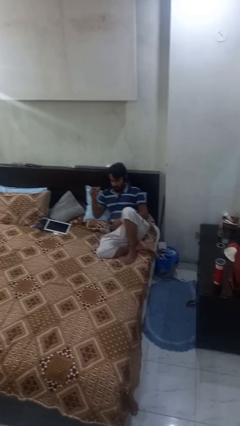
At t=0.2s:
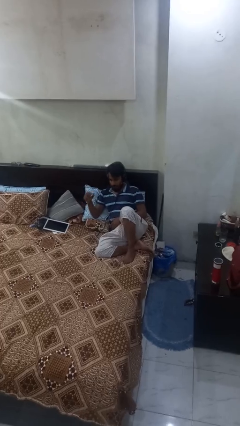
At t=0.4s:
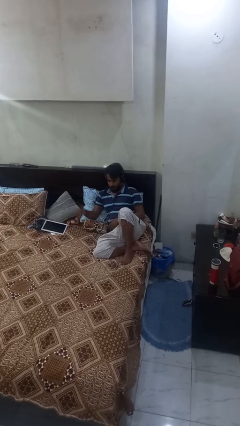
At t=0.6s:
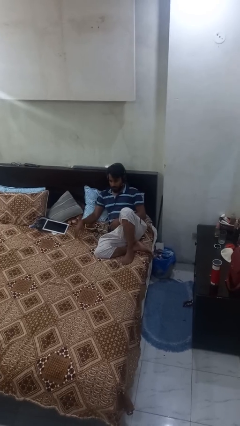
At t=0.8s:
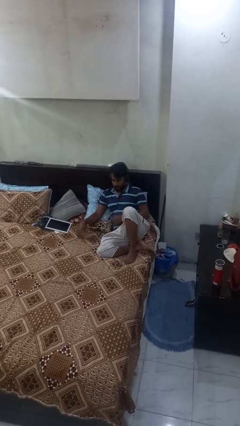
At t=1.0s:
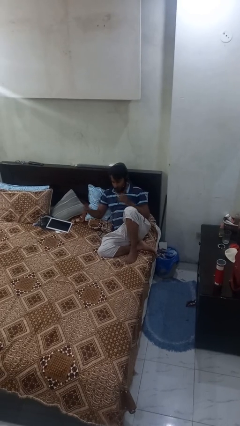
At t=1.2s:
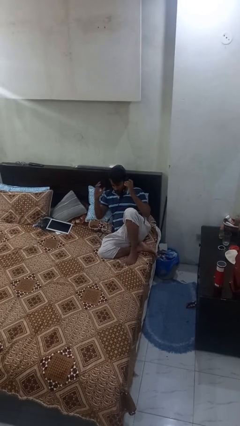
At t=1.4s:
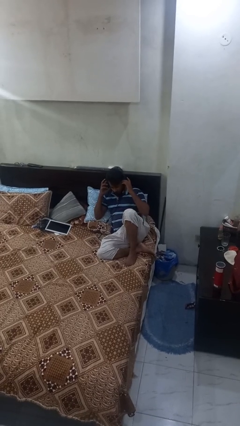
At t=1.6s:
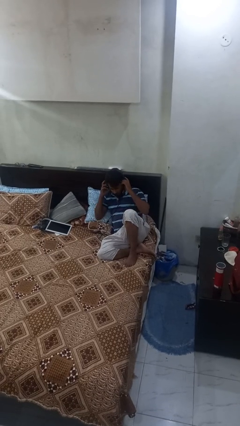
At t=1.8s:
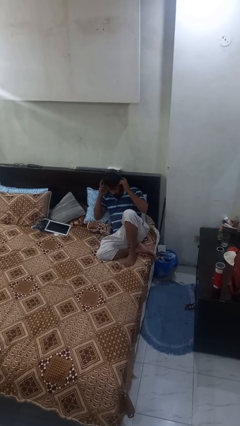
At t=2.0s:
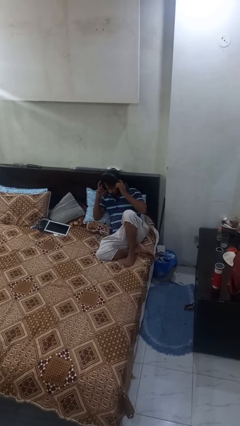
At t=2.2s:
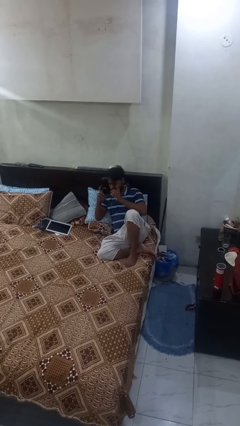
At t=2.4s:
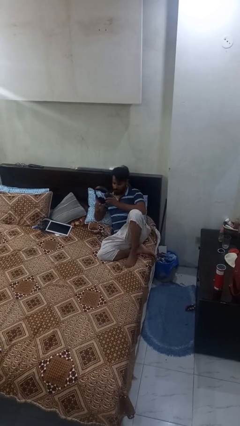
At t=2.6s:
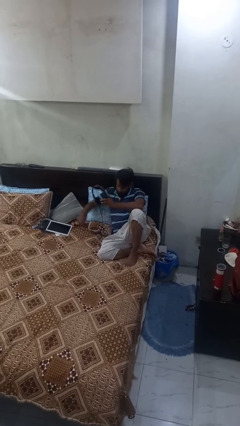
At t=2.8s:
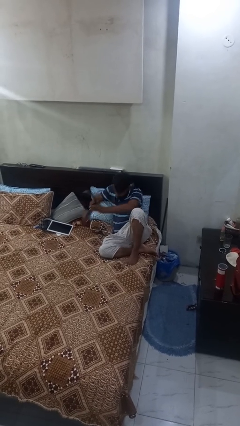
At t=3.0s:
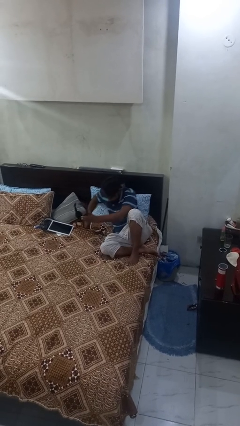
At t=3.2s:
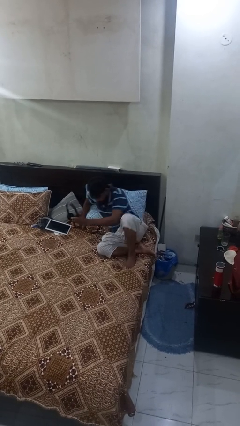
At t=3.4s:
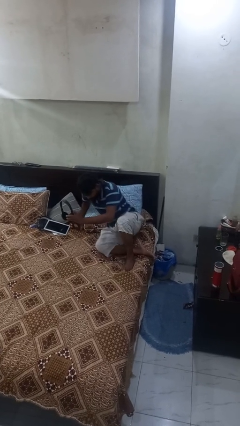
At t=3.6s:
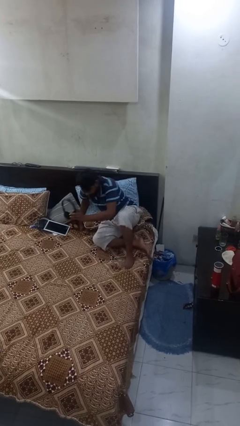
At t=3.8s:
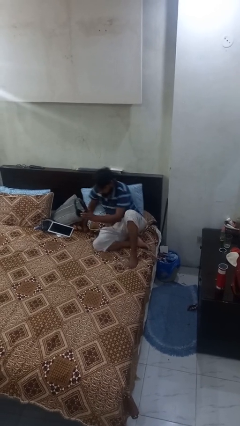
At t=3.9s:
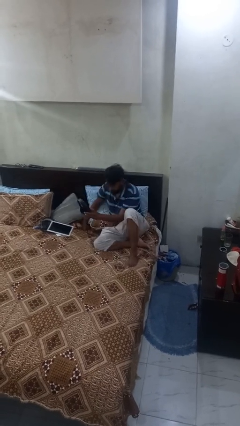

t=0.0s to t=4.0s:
person takes off headphones

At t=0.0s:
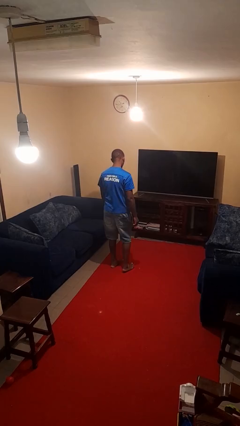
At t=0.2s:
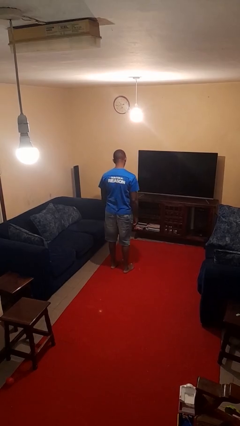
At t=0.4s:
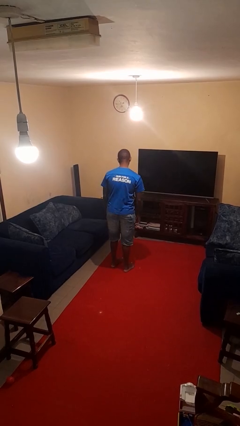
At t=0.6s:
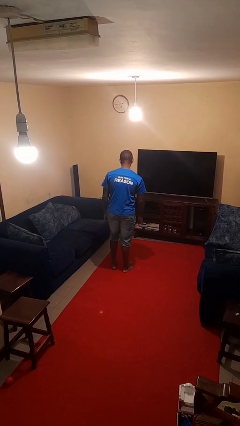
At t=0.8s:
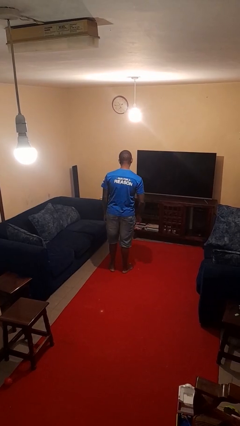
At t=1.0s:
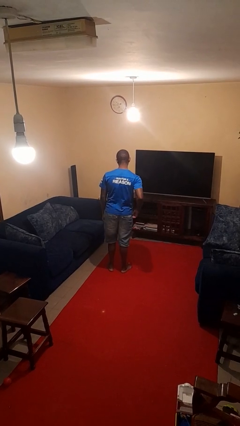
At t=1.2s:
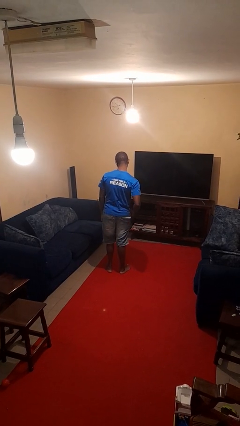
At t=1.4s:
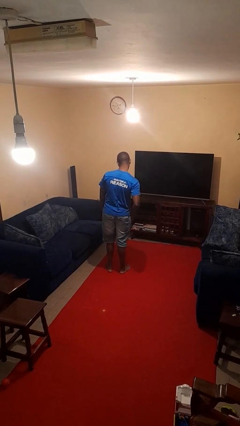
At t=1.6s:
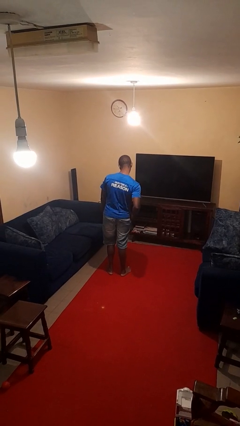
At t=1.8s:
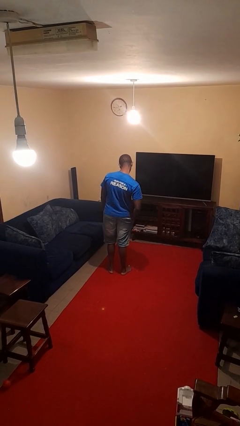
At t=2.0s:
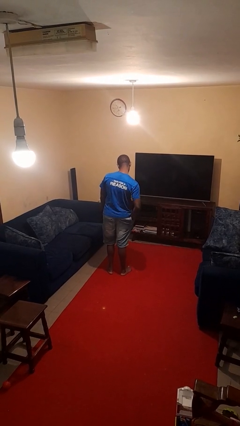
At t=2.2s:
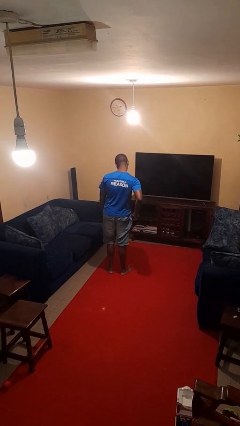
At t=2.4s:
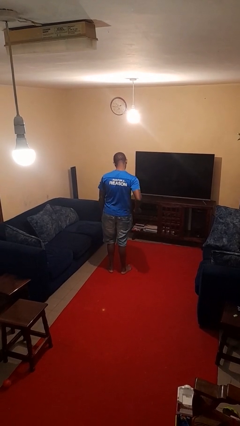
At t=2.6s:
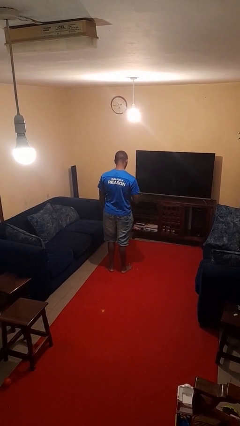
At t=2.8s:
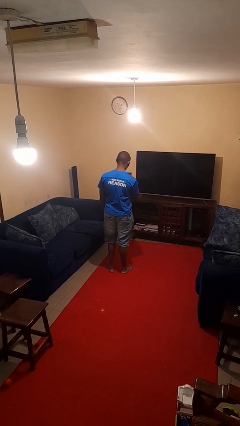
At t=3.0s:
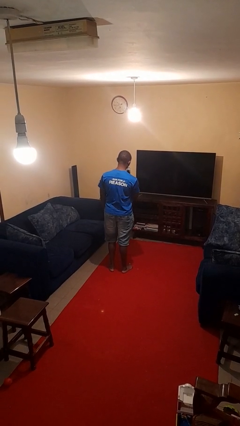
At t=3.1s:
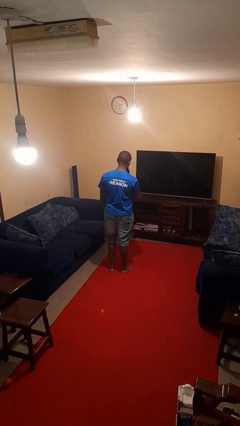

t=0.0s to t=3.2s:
person takes phone from pocket

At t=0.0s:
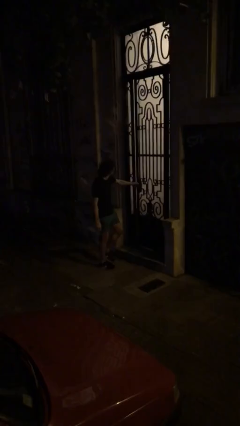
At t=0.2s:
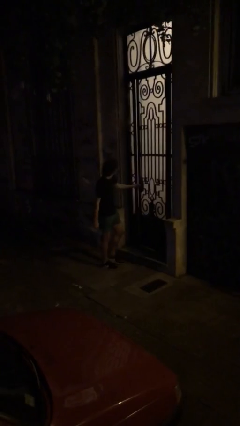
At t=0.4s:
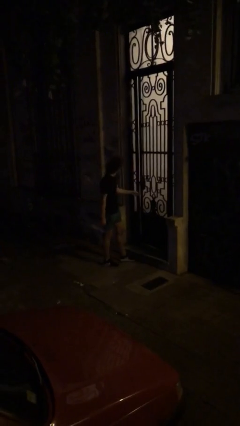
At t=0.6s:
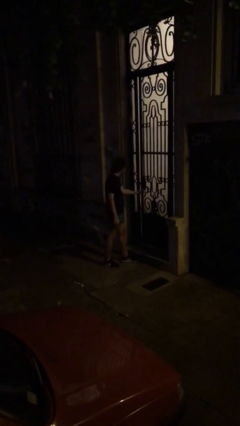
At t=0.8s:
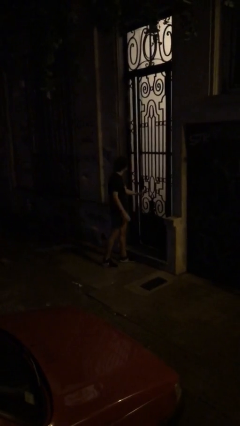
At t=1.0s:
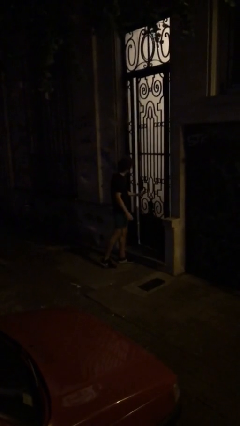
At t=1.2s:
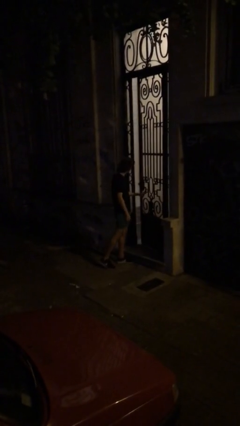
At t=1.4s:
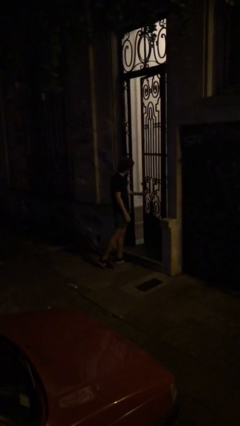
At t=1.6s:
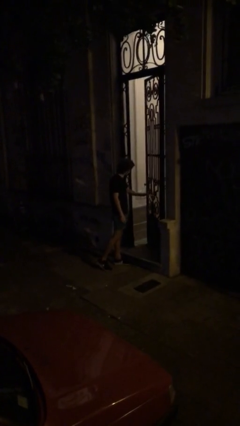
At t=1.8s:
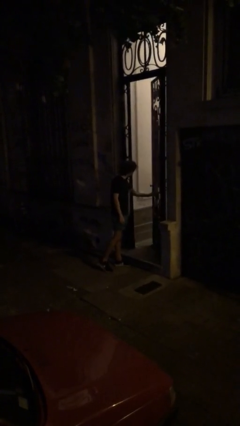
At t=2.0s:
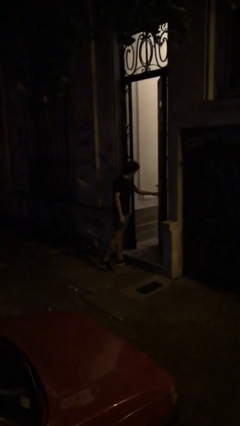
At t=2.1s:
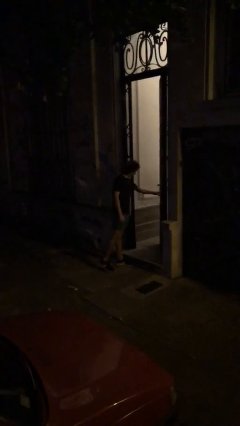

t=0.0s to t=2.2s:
person opens facility door

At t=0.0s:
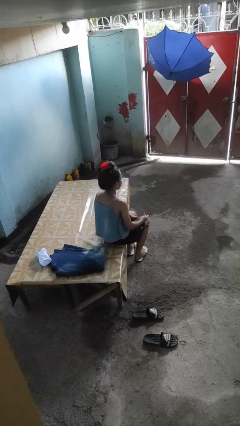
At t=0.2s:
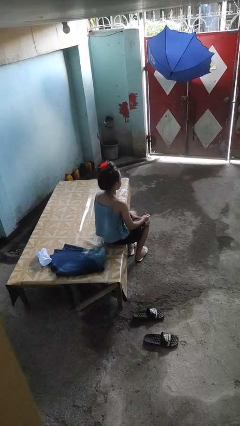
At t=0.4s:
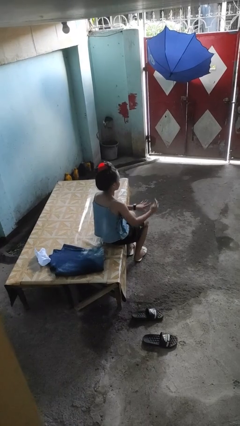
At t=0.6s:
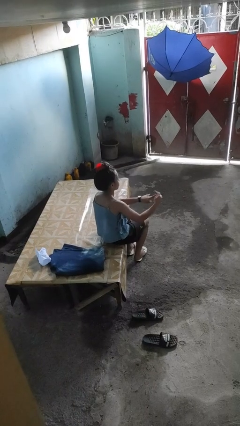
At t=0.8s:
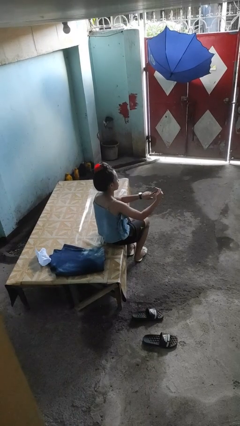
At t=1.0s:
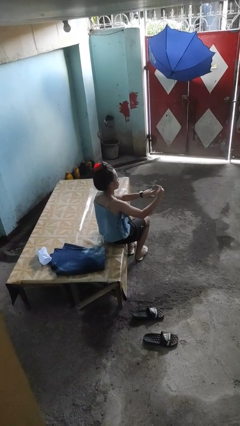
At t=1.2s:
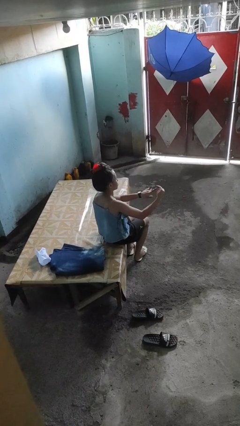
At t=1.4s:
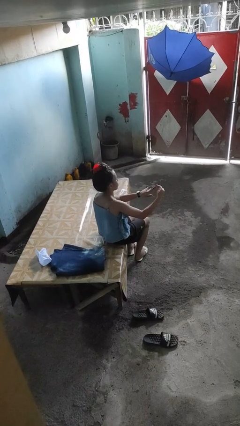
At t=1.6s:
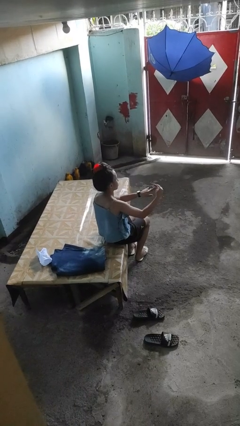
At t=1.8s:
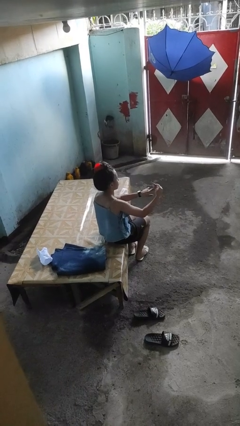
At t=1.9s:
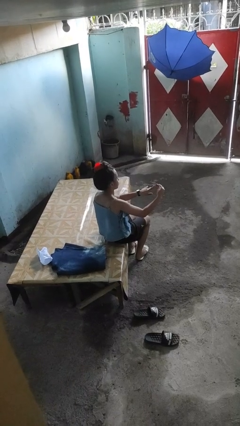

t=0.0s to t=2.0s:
person clips fingernails

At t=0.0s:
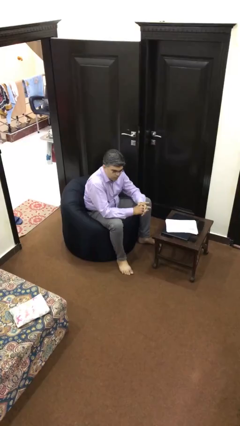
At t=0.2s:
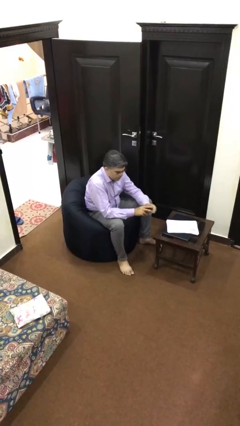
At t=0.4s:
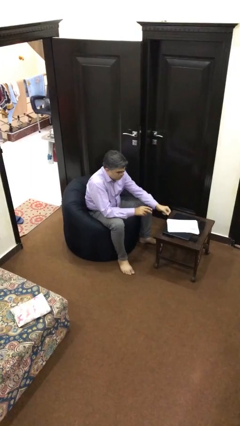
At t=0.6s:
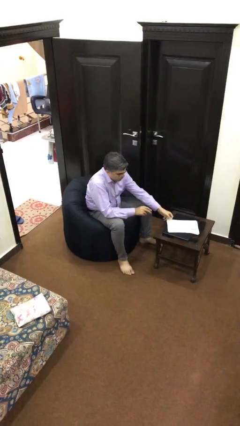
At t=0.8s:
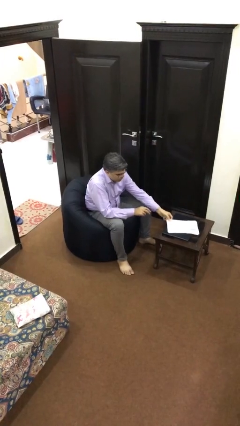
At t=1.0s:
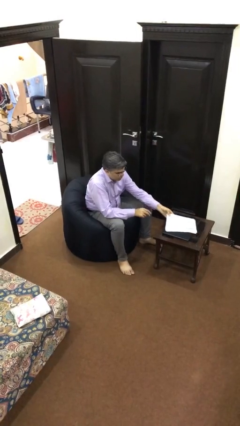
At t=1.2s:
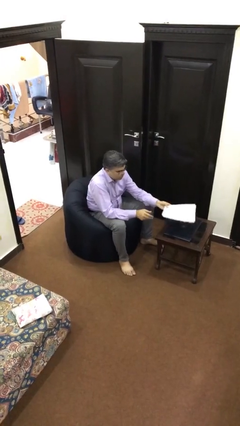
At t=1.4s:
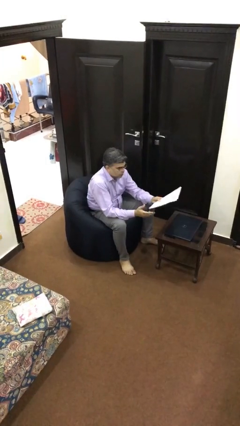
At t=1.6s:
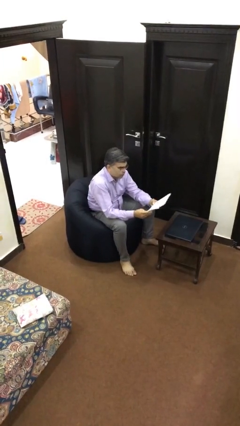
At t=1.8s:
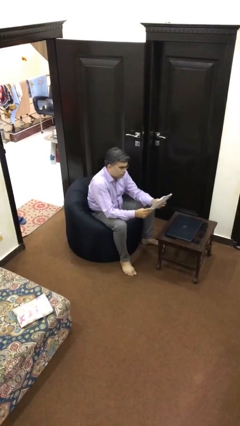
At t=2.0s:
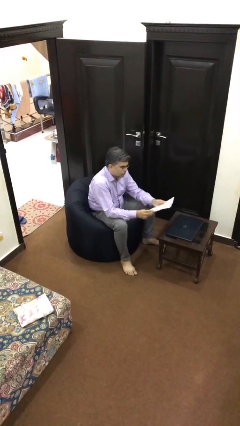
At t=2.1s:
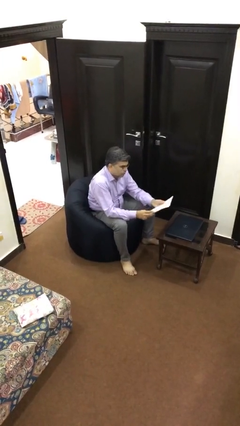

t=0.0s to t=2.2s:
person picks up object from table

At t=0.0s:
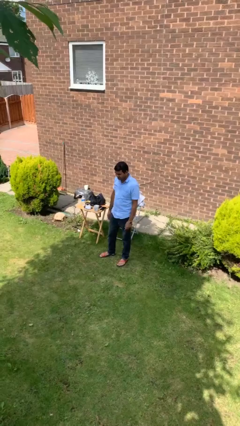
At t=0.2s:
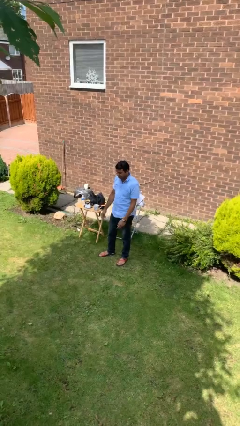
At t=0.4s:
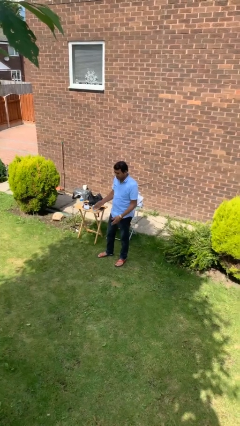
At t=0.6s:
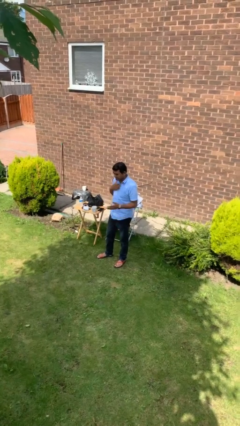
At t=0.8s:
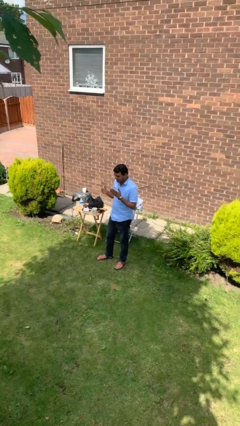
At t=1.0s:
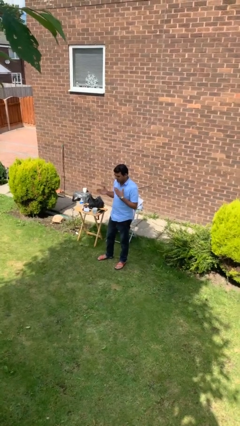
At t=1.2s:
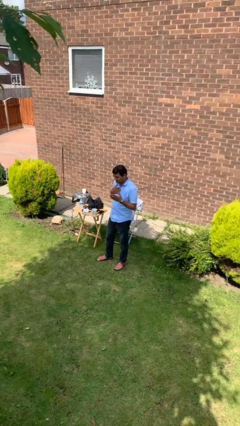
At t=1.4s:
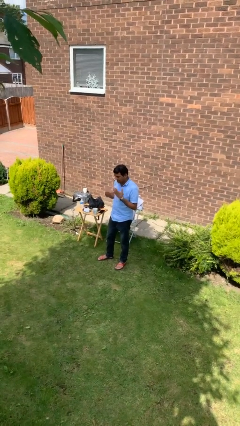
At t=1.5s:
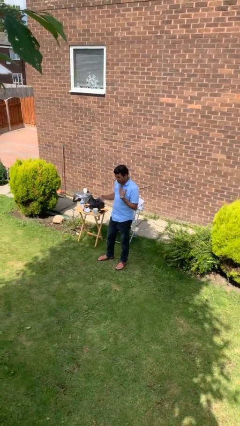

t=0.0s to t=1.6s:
person drums on chest

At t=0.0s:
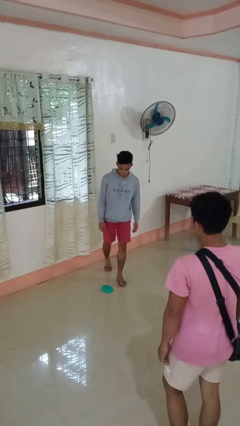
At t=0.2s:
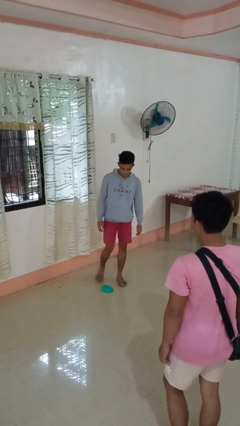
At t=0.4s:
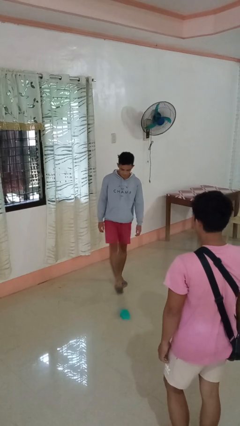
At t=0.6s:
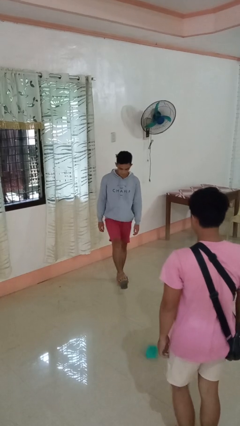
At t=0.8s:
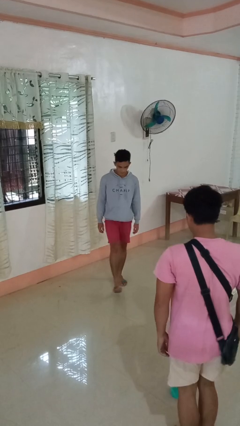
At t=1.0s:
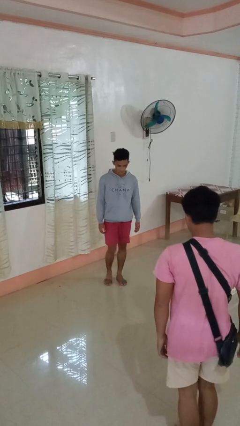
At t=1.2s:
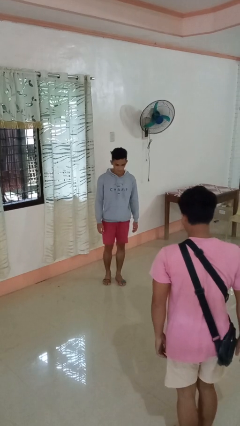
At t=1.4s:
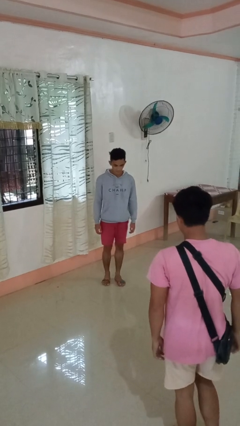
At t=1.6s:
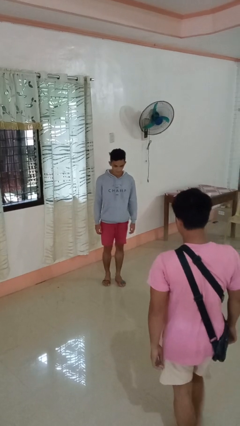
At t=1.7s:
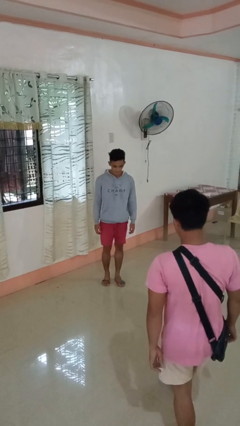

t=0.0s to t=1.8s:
person kicks object to person
